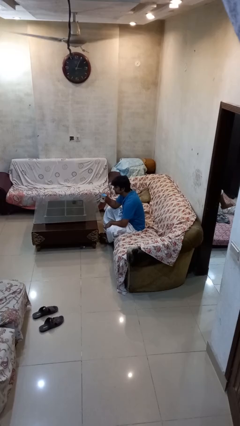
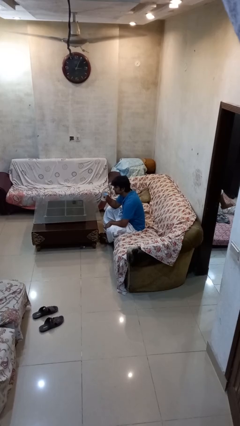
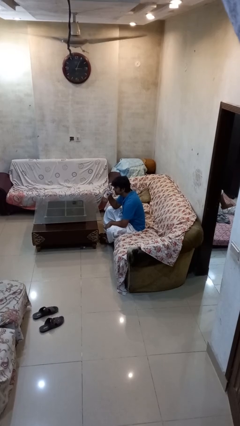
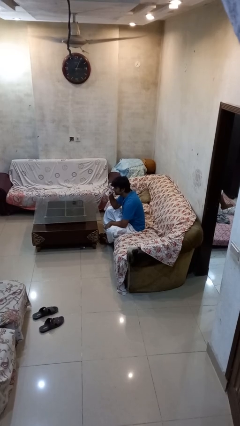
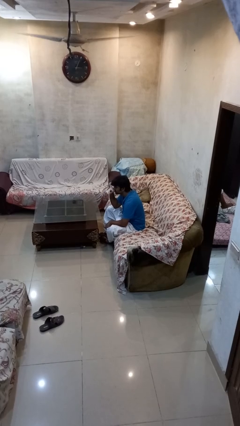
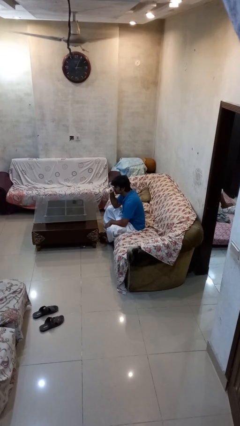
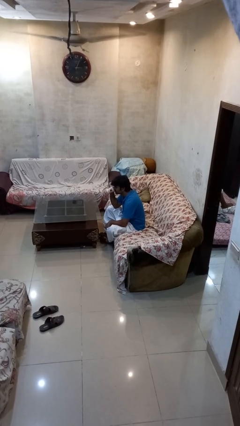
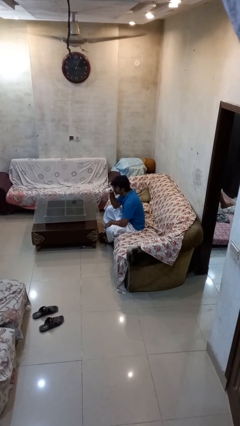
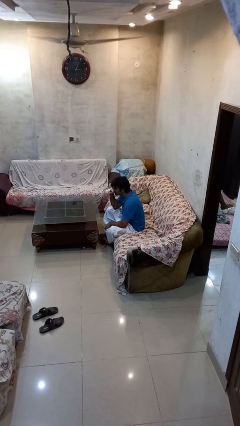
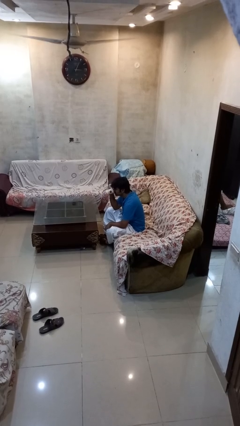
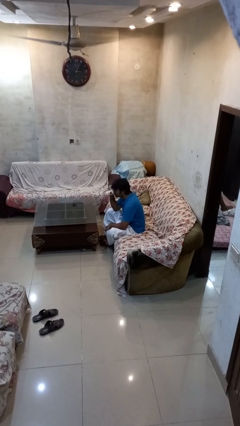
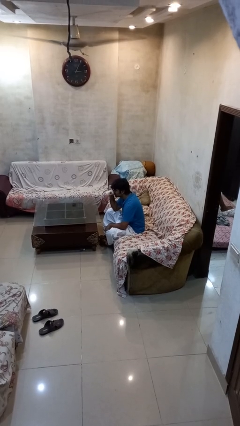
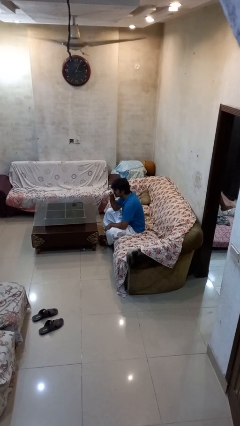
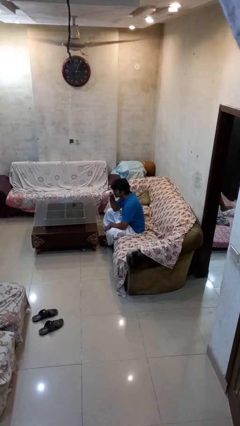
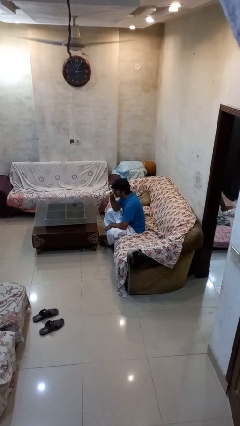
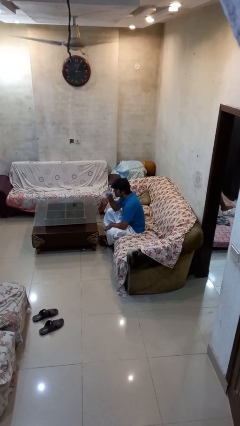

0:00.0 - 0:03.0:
person drinks from mug

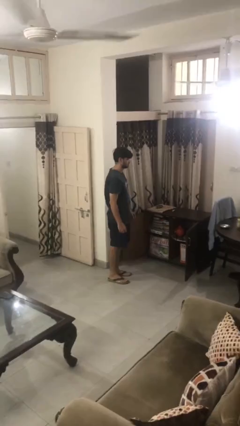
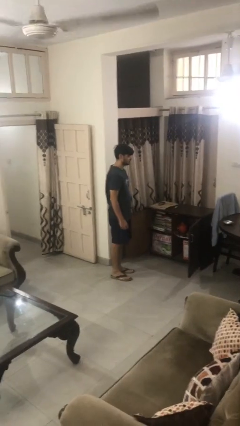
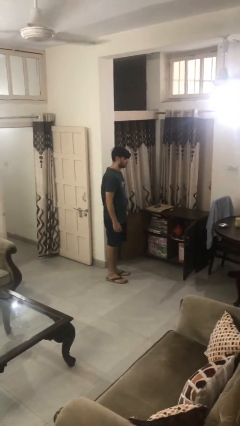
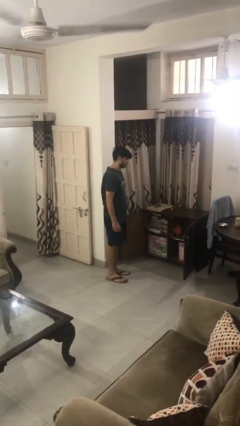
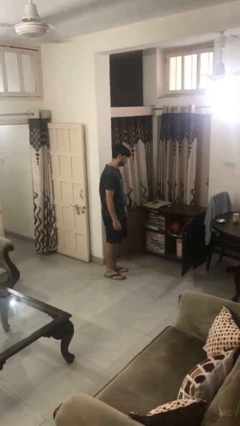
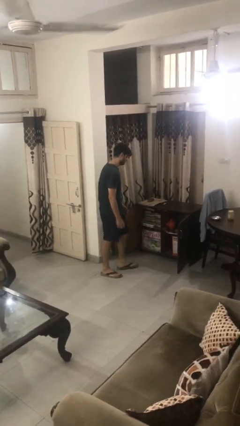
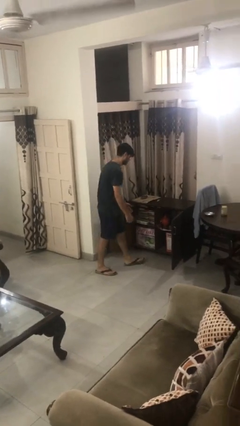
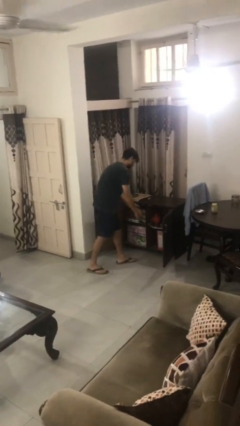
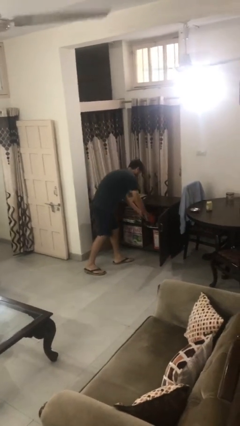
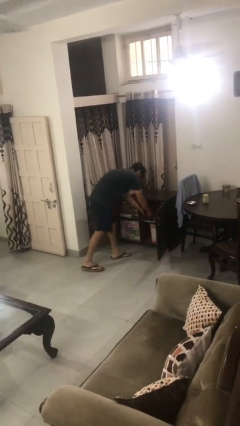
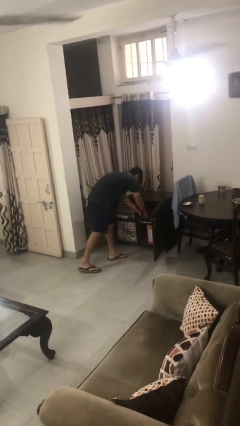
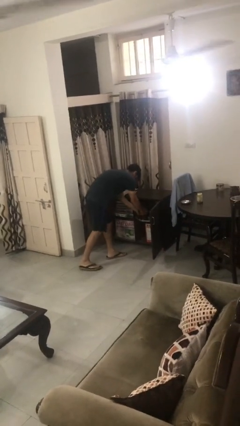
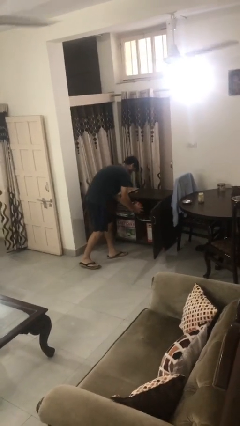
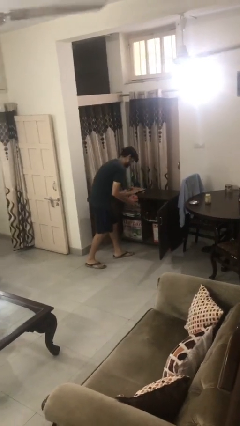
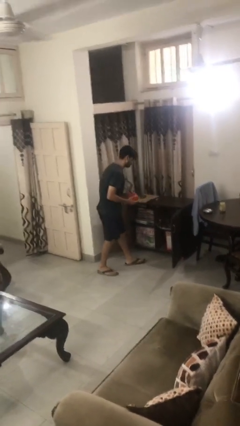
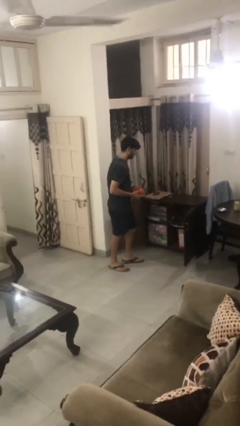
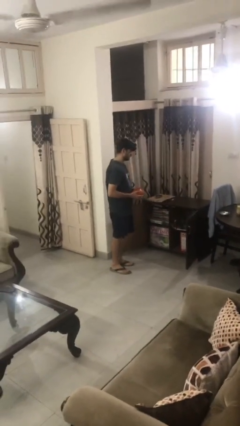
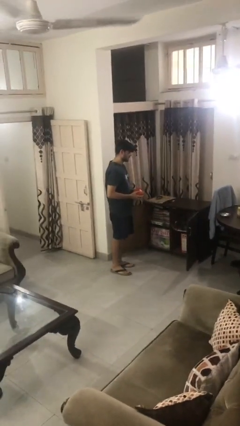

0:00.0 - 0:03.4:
person picks up object from cabinet

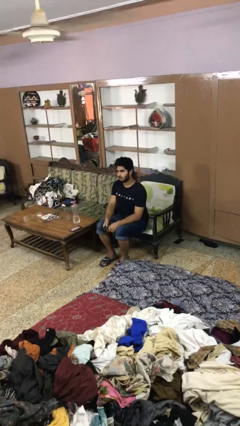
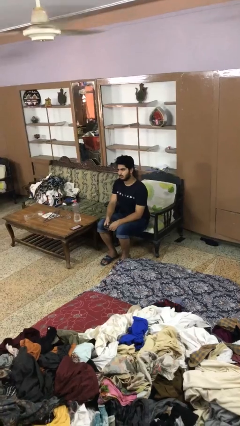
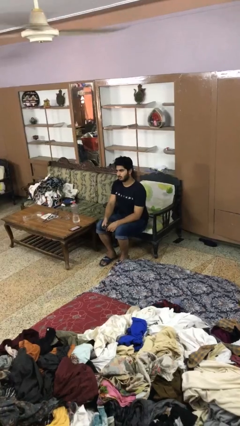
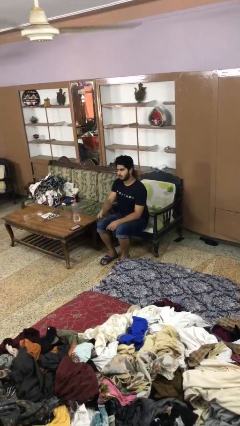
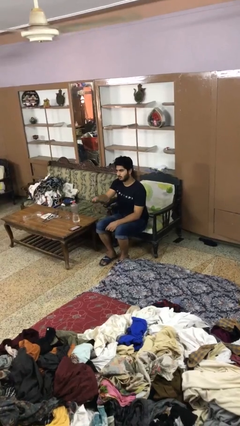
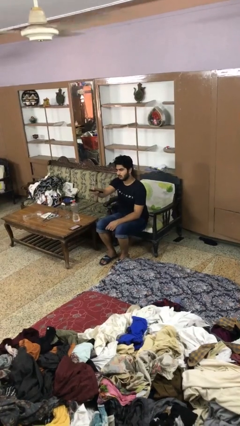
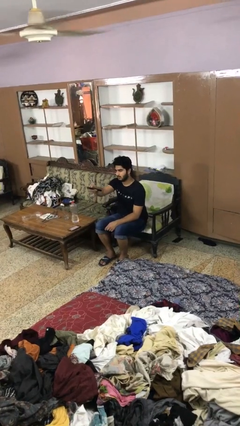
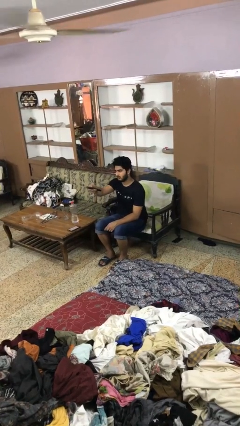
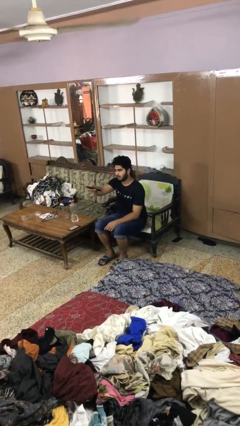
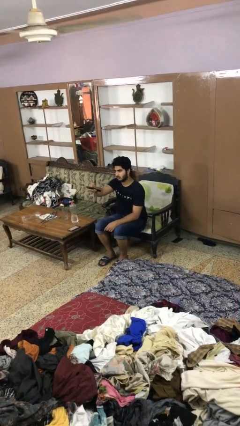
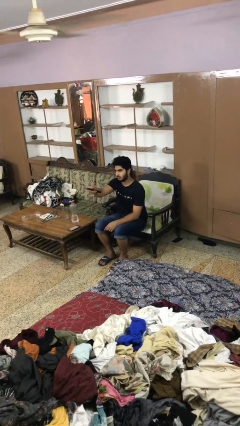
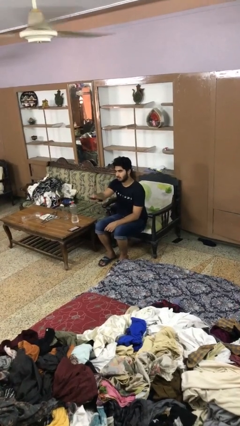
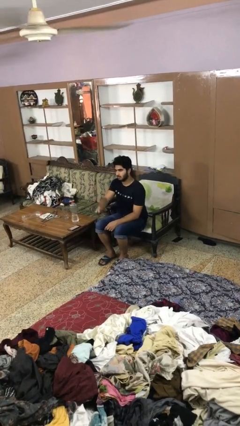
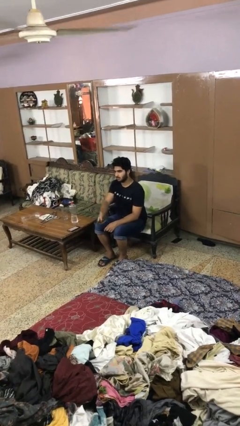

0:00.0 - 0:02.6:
person uses television remote

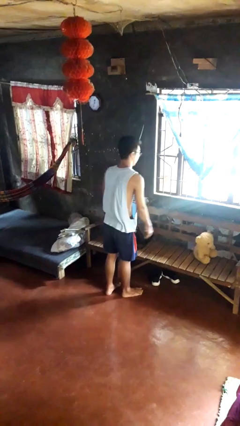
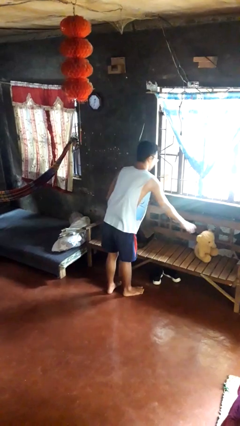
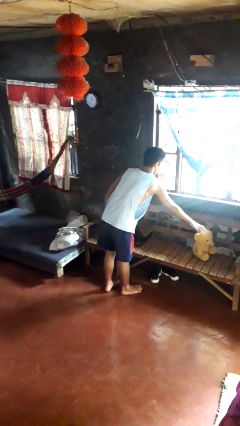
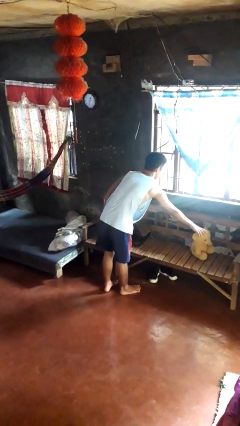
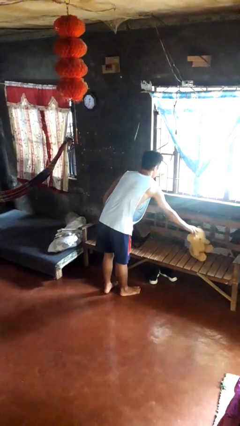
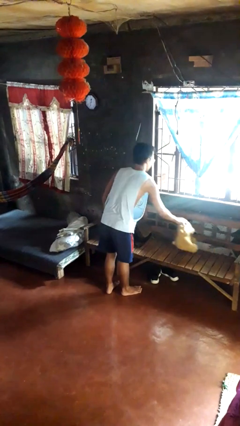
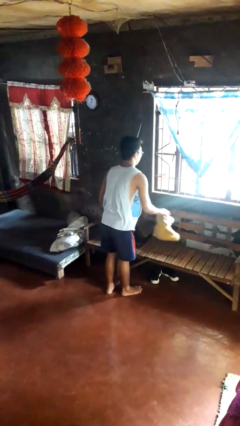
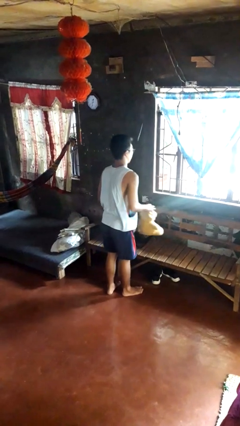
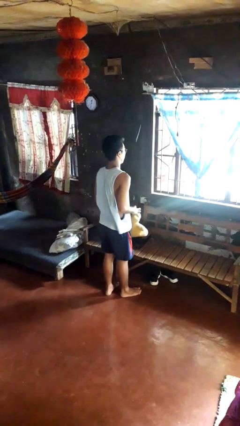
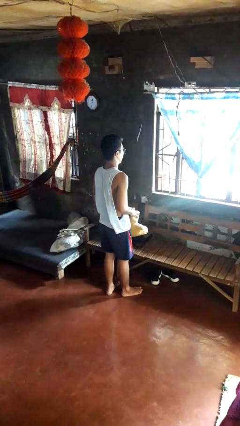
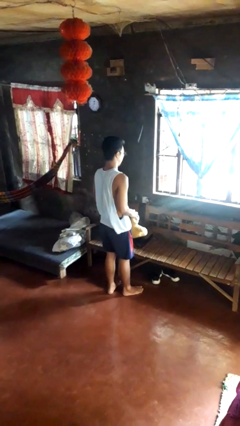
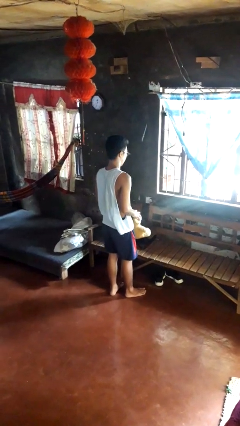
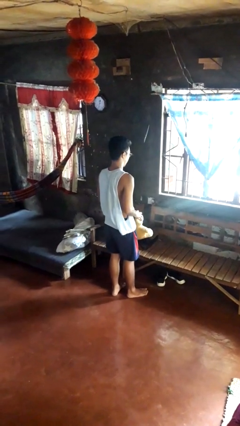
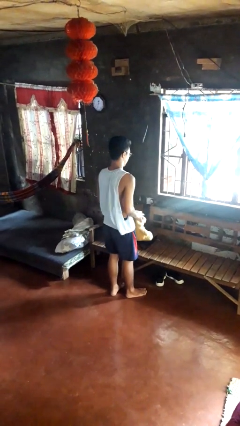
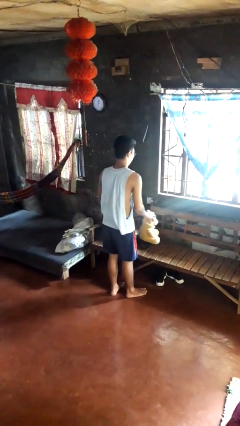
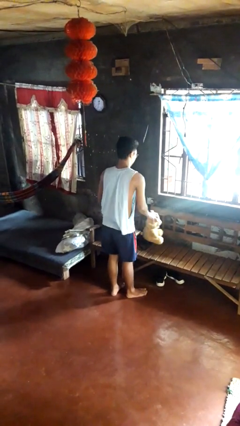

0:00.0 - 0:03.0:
person picks up object from couch

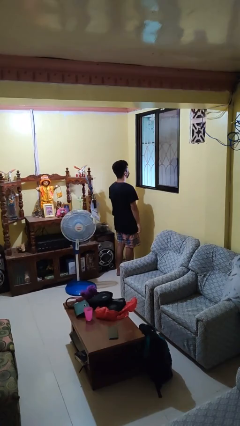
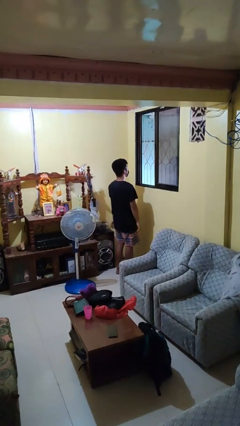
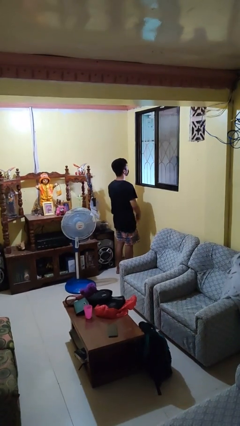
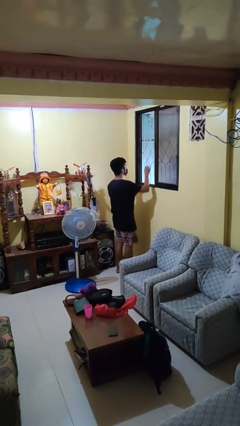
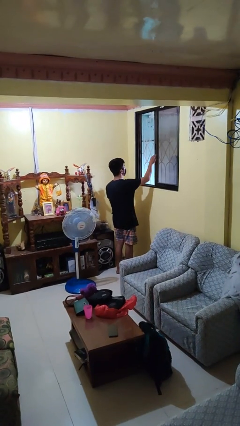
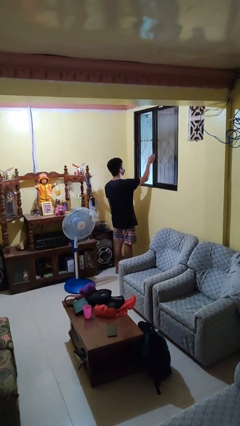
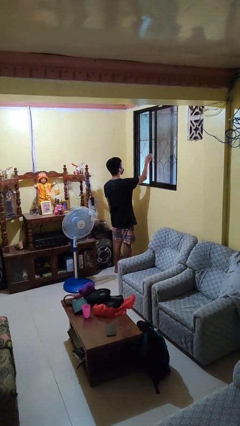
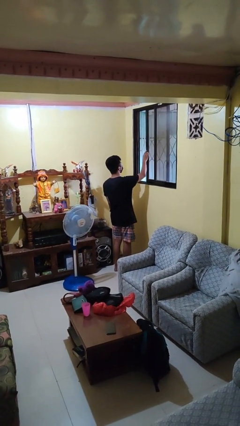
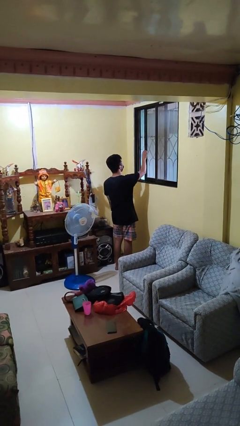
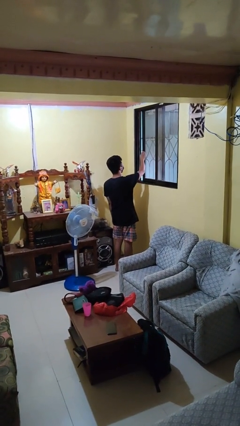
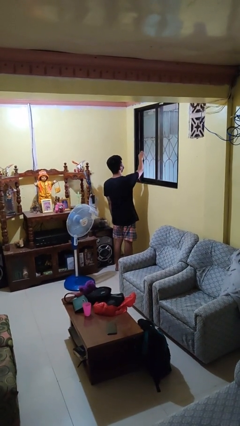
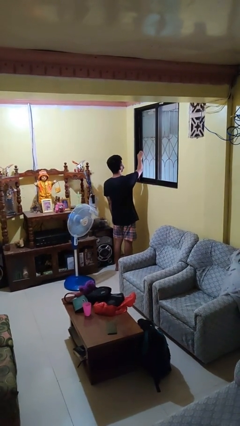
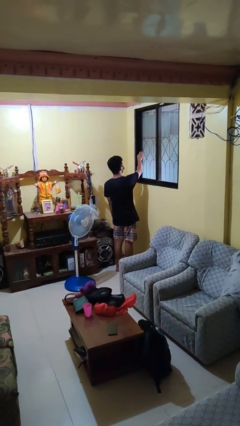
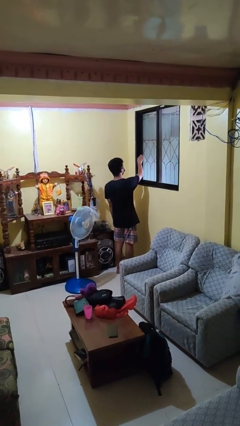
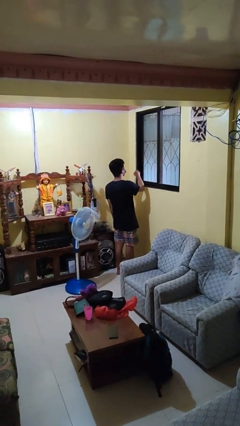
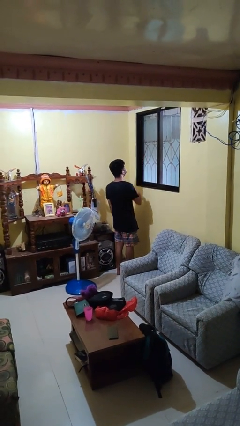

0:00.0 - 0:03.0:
person closes home window

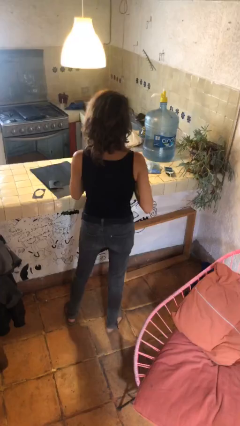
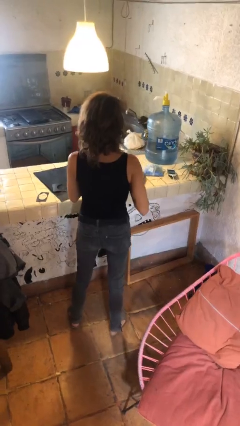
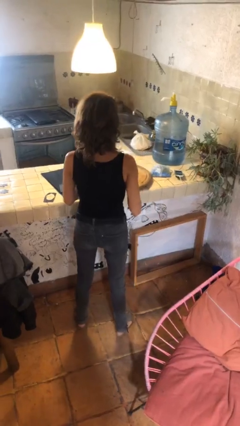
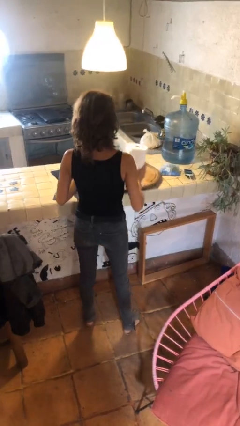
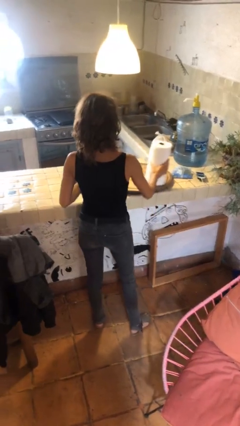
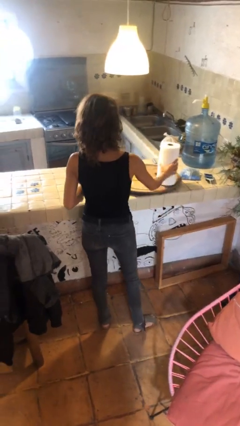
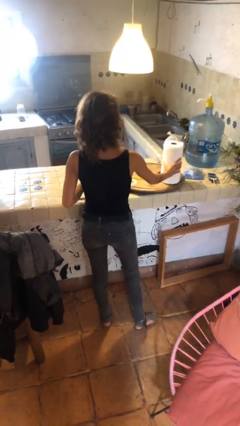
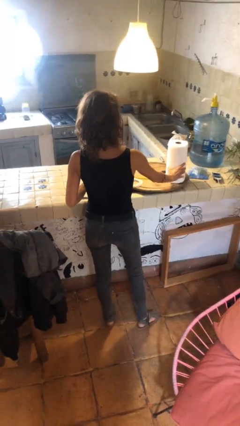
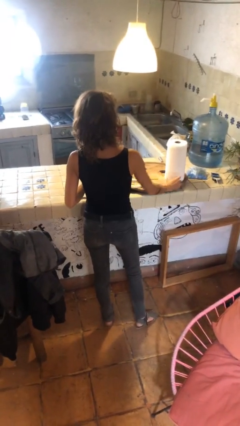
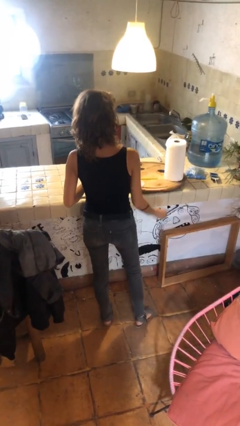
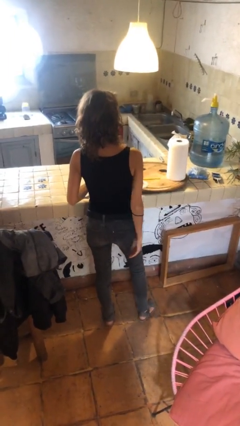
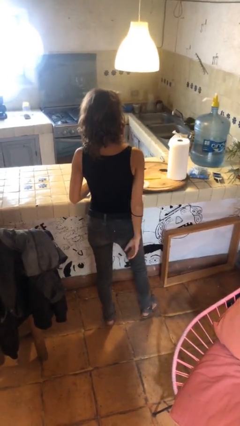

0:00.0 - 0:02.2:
person puts down object on countertop
